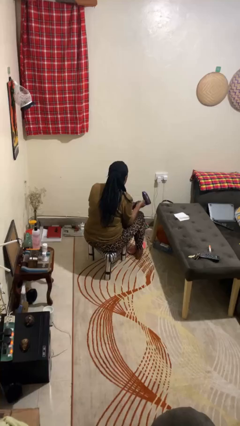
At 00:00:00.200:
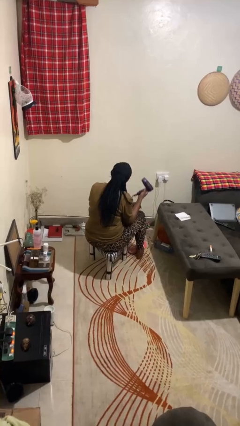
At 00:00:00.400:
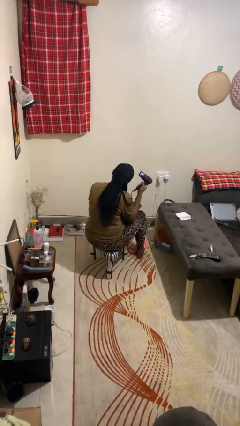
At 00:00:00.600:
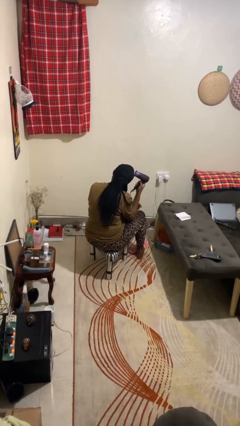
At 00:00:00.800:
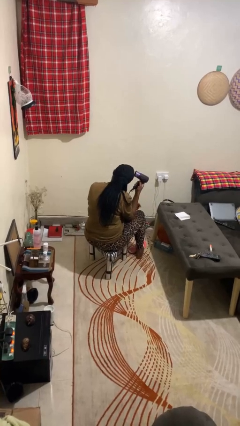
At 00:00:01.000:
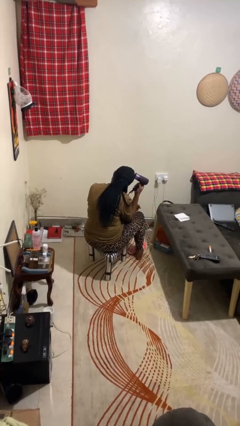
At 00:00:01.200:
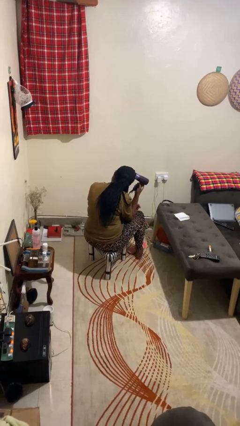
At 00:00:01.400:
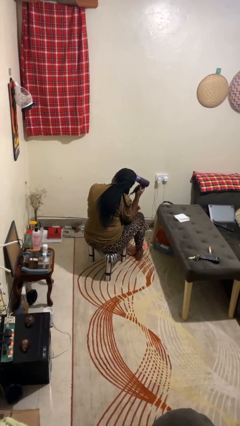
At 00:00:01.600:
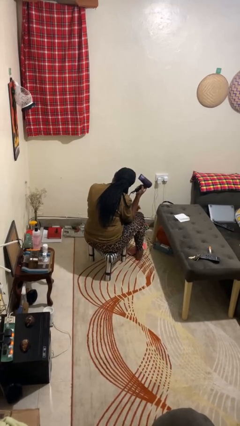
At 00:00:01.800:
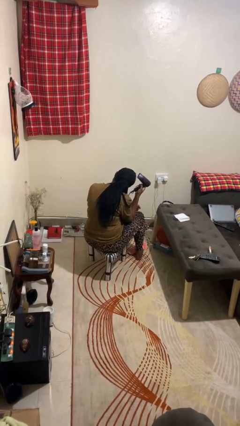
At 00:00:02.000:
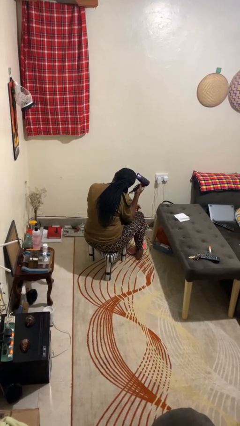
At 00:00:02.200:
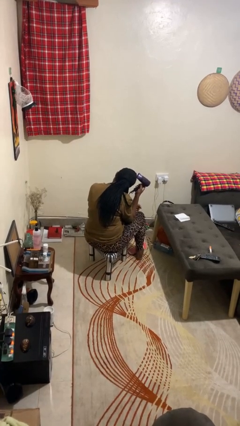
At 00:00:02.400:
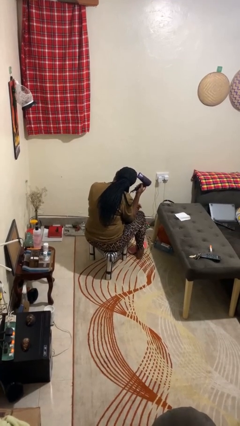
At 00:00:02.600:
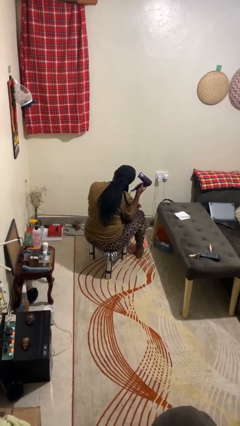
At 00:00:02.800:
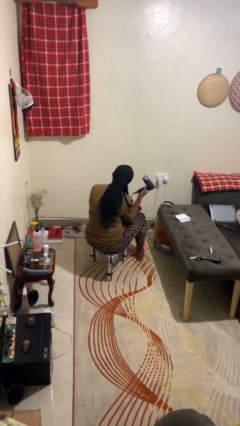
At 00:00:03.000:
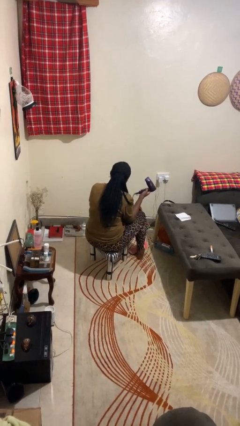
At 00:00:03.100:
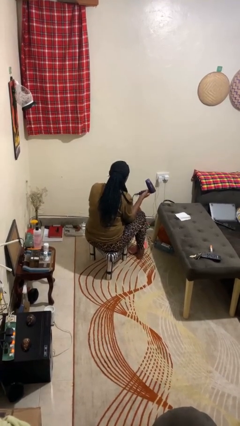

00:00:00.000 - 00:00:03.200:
person dries hair with hairdryer

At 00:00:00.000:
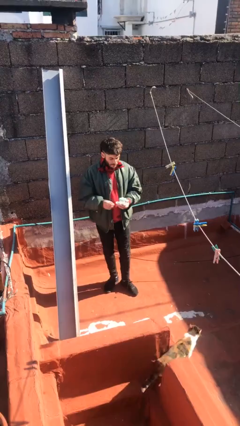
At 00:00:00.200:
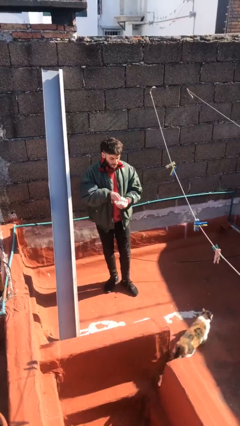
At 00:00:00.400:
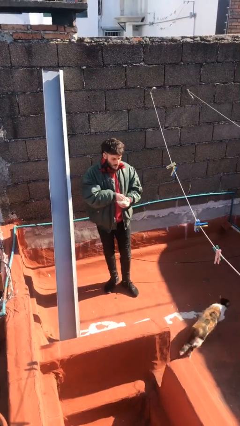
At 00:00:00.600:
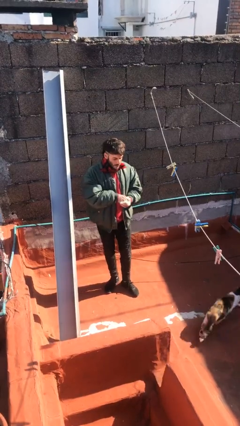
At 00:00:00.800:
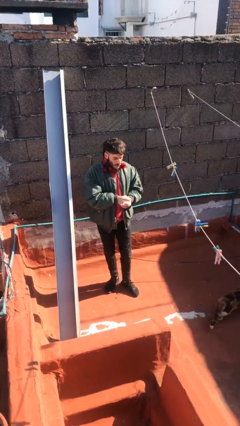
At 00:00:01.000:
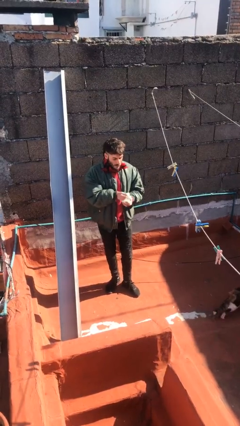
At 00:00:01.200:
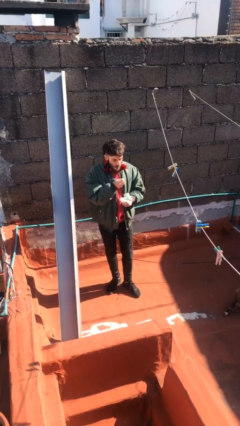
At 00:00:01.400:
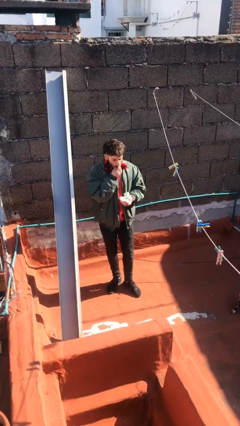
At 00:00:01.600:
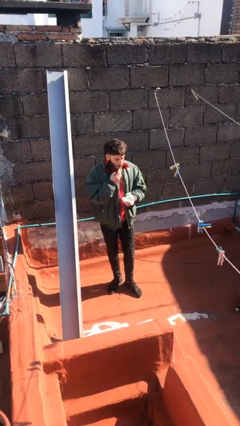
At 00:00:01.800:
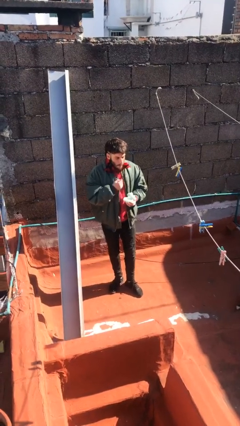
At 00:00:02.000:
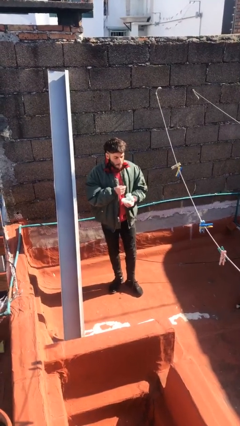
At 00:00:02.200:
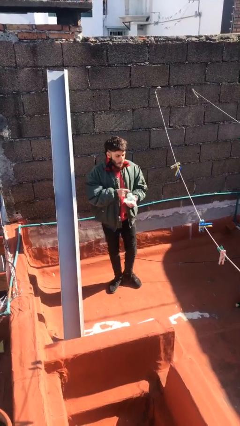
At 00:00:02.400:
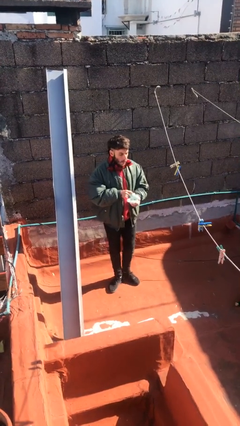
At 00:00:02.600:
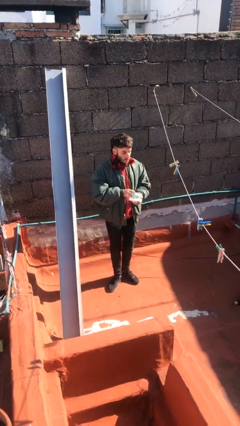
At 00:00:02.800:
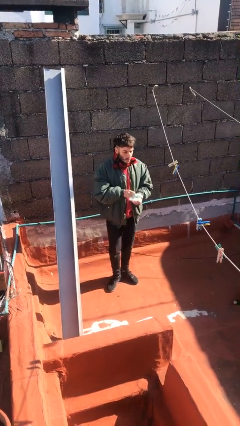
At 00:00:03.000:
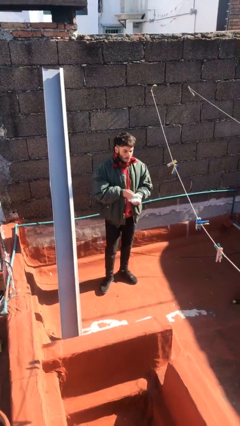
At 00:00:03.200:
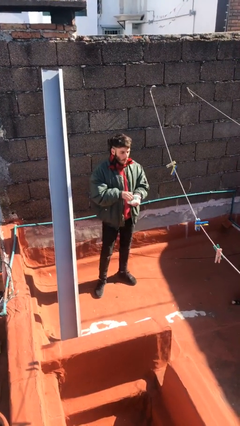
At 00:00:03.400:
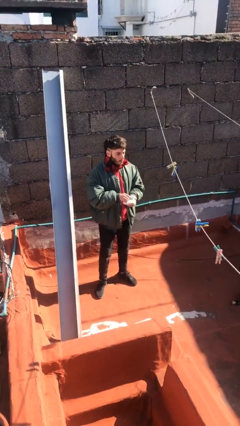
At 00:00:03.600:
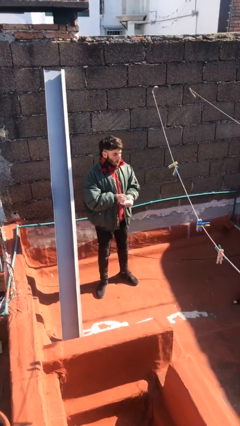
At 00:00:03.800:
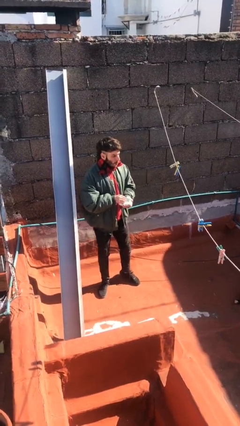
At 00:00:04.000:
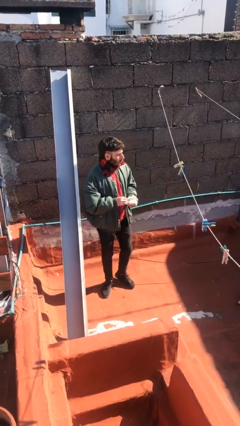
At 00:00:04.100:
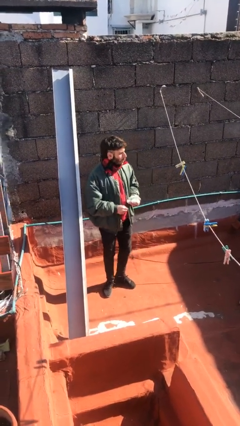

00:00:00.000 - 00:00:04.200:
person eats snack from bag

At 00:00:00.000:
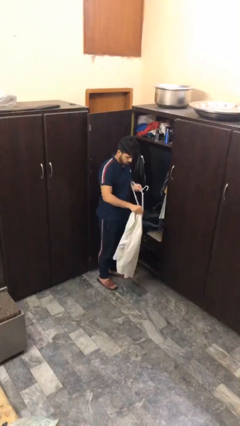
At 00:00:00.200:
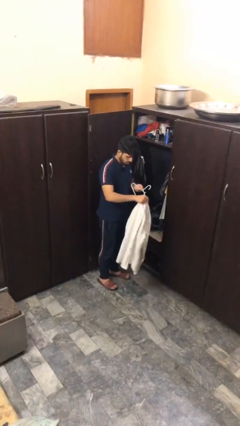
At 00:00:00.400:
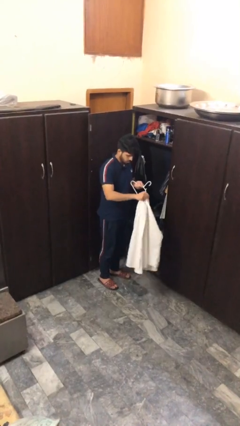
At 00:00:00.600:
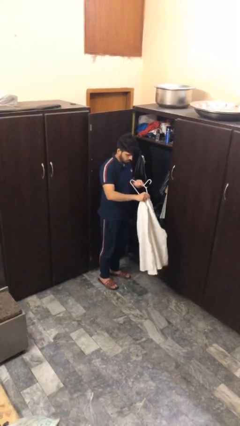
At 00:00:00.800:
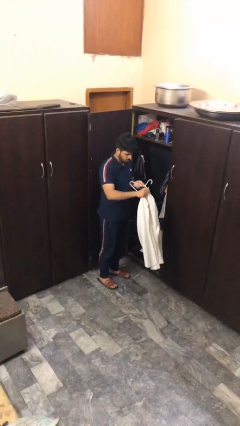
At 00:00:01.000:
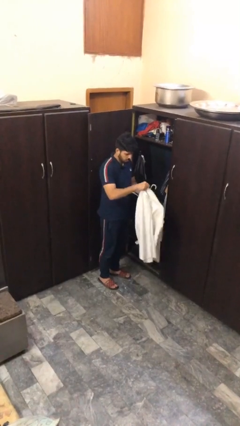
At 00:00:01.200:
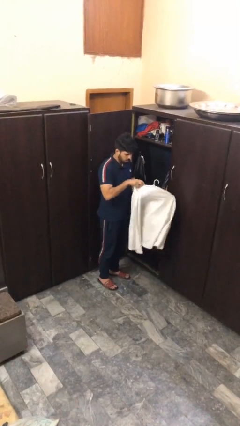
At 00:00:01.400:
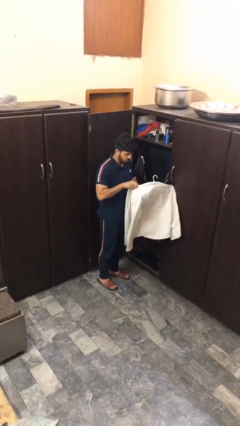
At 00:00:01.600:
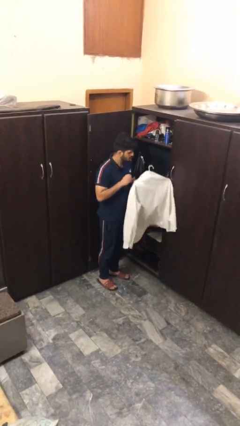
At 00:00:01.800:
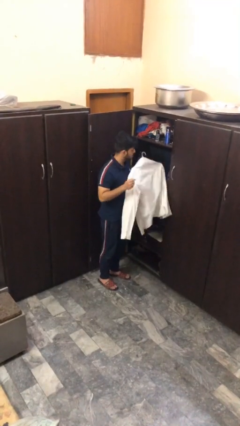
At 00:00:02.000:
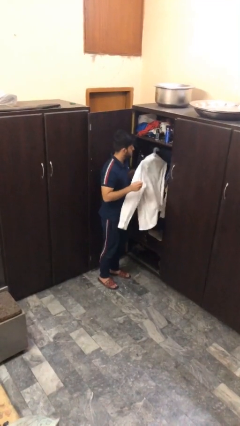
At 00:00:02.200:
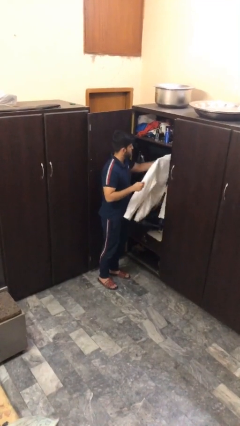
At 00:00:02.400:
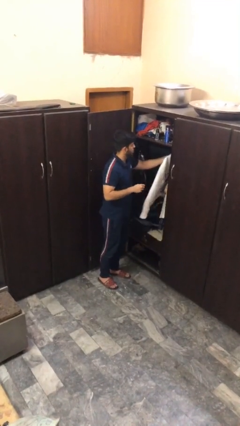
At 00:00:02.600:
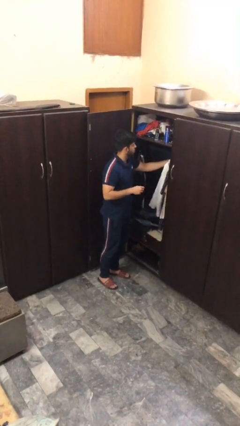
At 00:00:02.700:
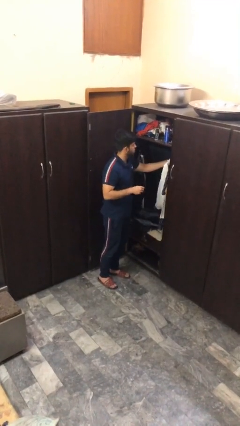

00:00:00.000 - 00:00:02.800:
person puts clothes into closet

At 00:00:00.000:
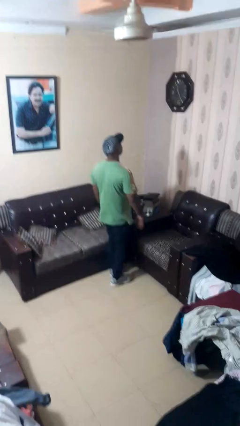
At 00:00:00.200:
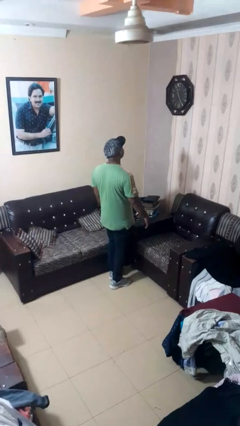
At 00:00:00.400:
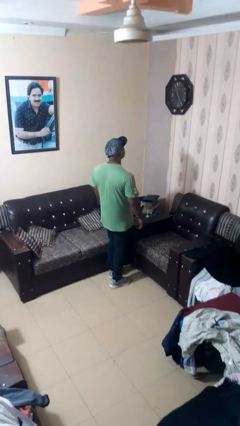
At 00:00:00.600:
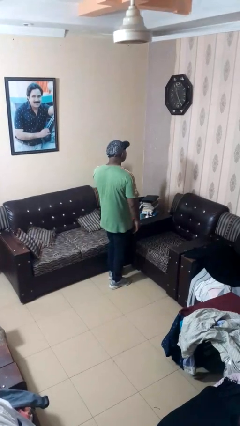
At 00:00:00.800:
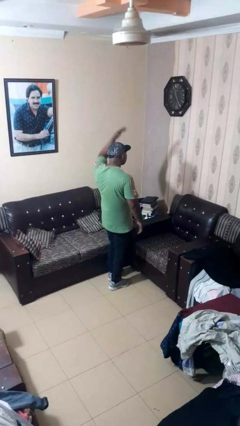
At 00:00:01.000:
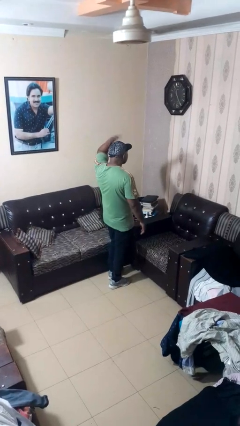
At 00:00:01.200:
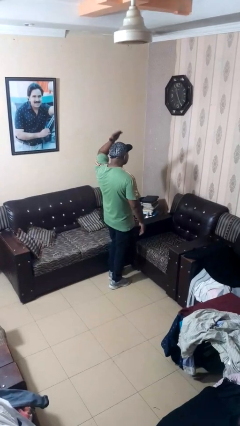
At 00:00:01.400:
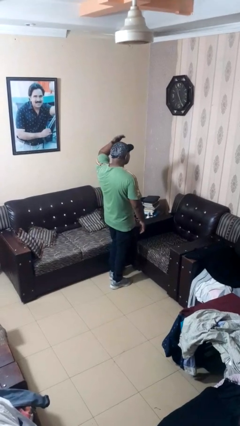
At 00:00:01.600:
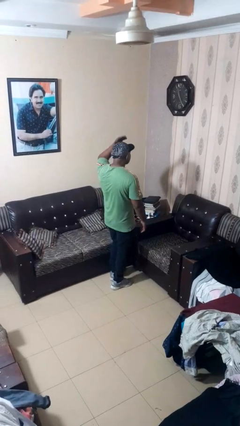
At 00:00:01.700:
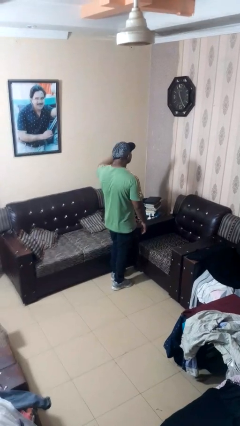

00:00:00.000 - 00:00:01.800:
person pats head

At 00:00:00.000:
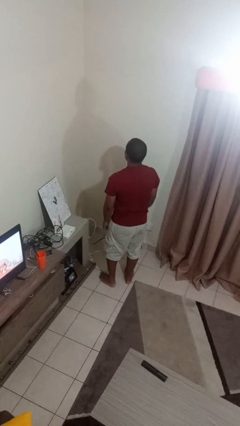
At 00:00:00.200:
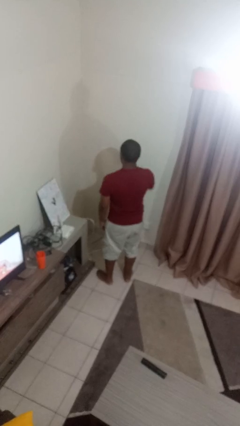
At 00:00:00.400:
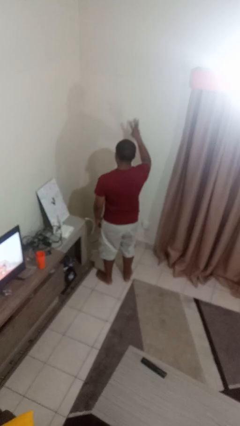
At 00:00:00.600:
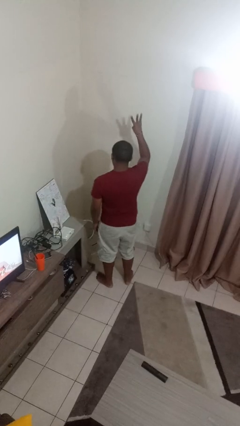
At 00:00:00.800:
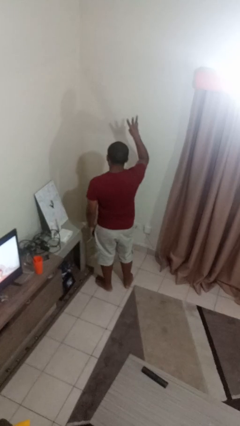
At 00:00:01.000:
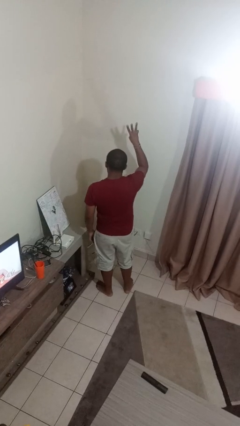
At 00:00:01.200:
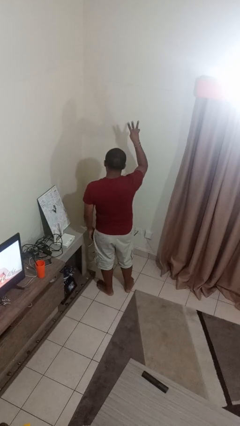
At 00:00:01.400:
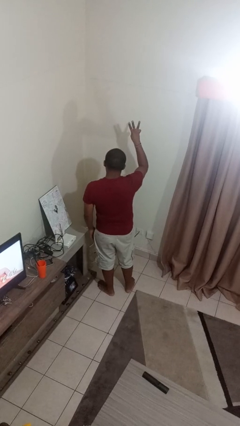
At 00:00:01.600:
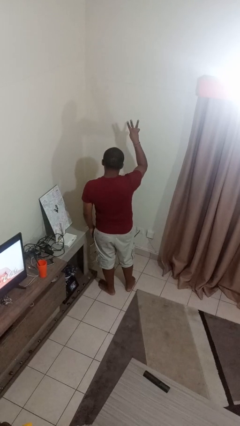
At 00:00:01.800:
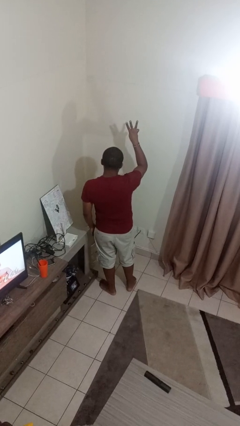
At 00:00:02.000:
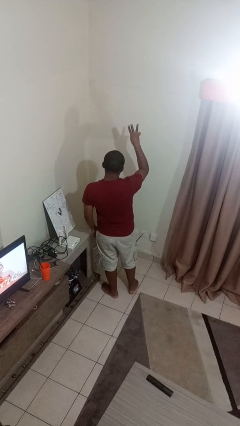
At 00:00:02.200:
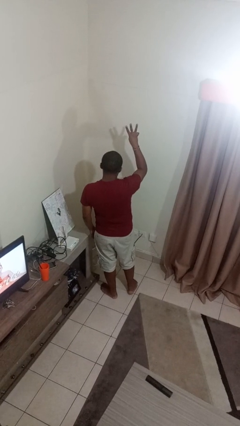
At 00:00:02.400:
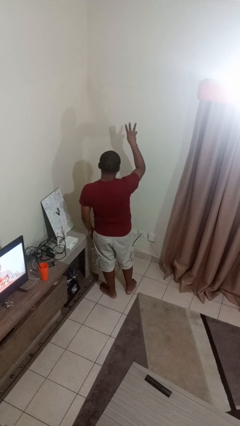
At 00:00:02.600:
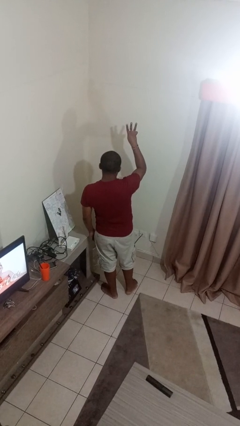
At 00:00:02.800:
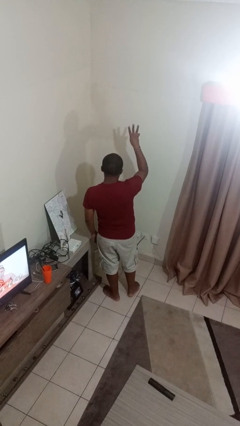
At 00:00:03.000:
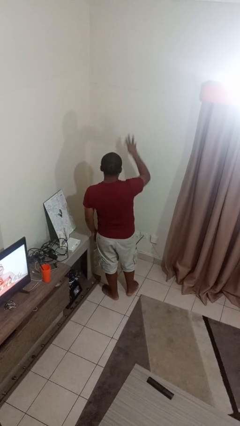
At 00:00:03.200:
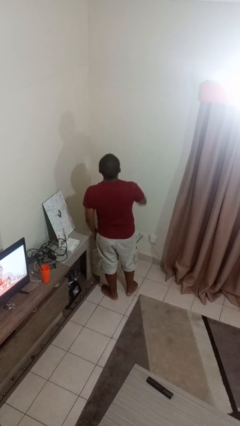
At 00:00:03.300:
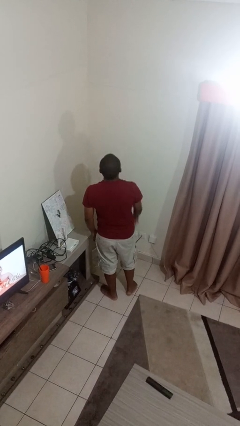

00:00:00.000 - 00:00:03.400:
person gestures number three

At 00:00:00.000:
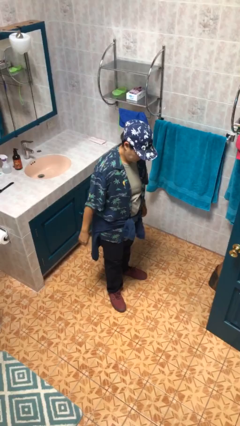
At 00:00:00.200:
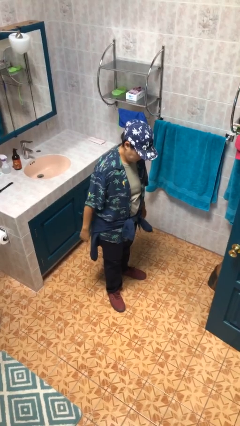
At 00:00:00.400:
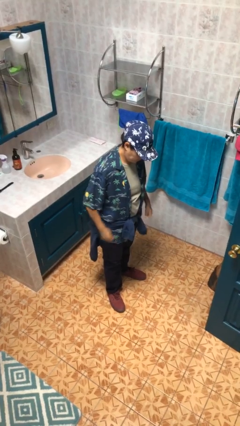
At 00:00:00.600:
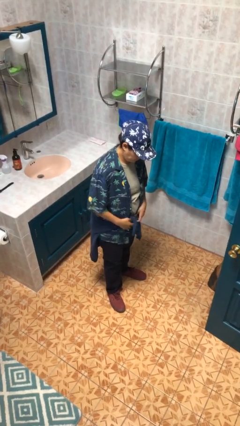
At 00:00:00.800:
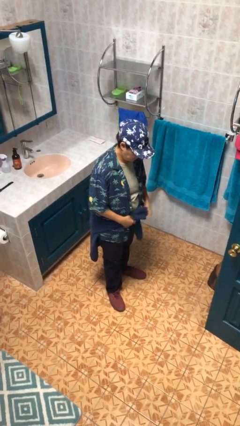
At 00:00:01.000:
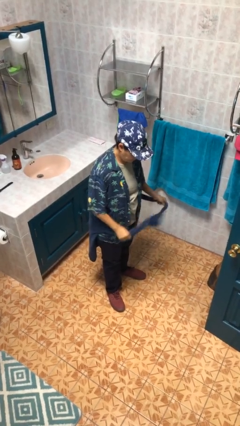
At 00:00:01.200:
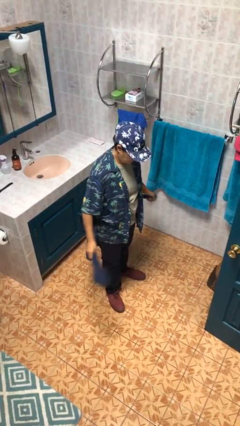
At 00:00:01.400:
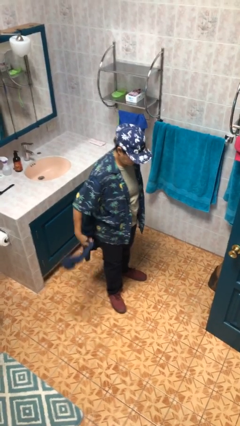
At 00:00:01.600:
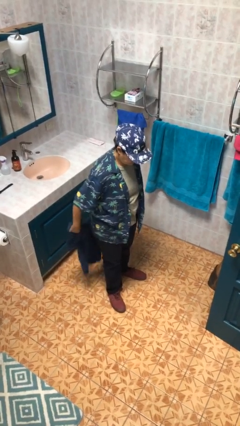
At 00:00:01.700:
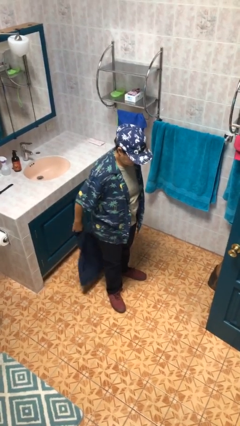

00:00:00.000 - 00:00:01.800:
person unties jacket around waist
